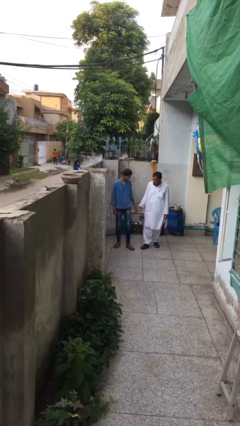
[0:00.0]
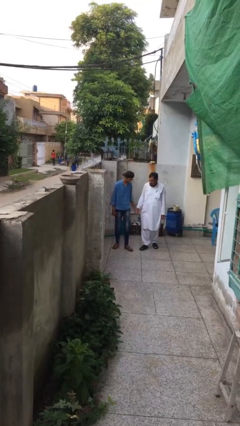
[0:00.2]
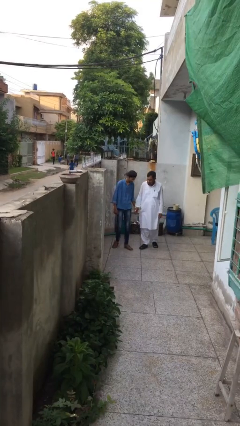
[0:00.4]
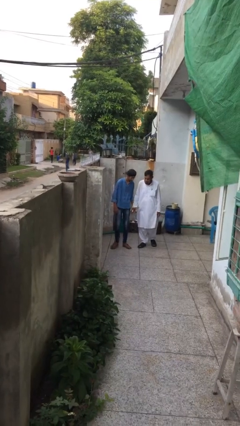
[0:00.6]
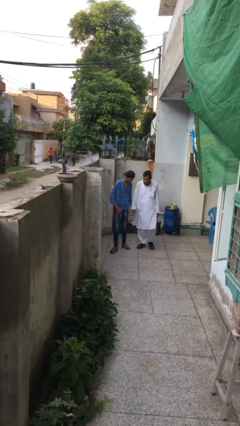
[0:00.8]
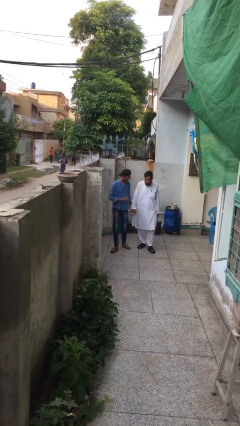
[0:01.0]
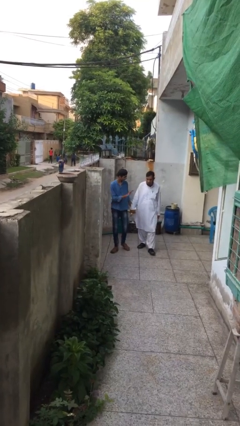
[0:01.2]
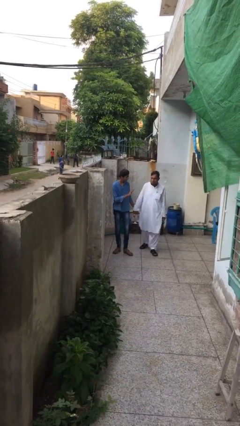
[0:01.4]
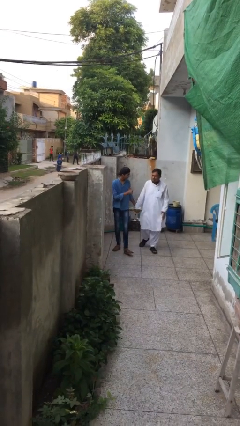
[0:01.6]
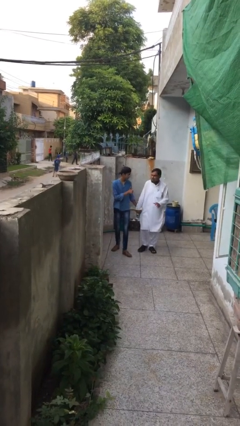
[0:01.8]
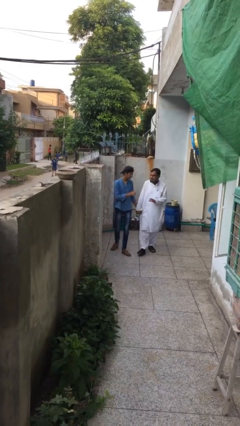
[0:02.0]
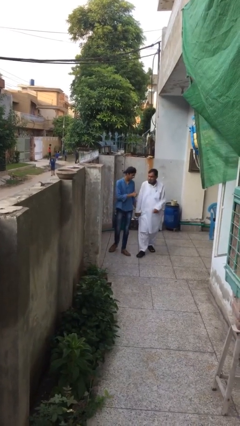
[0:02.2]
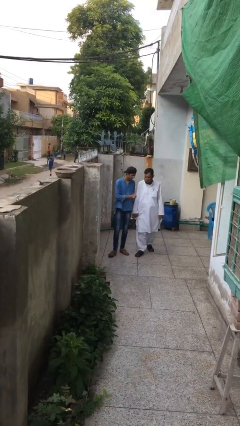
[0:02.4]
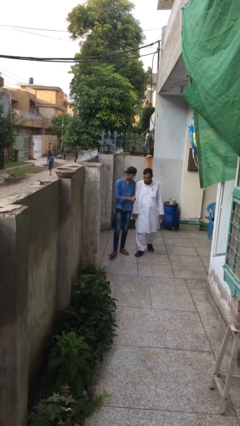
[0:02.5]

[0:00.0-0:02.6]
person holds hand

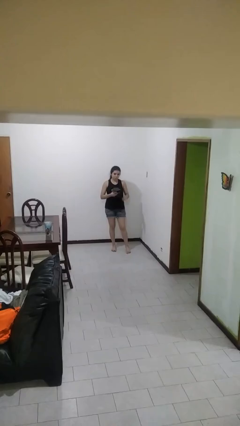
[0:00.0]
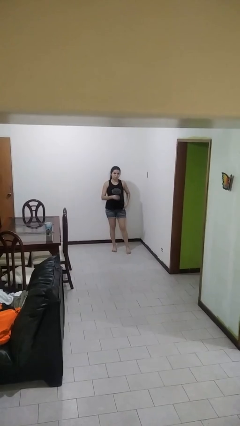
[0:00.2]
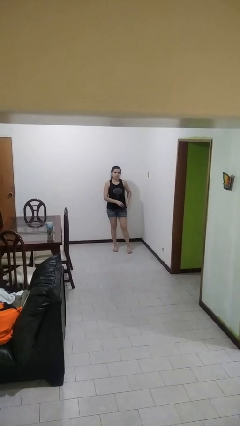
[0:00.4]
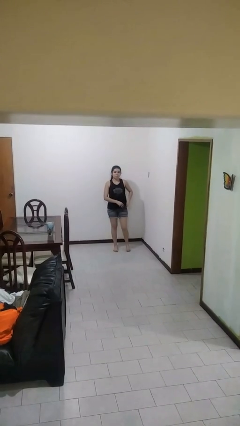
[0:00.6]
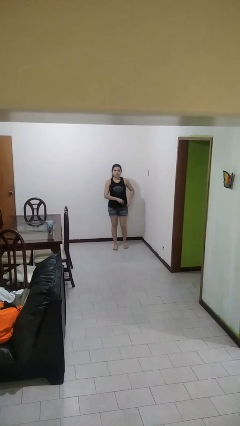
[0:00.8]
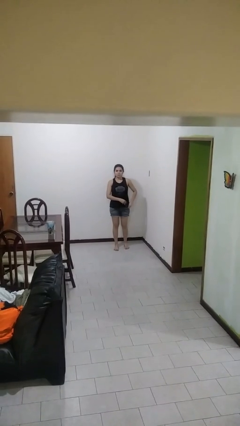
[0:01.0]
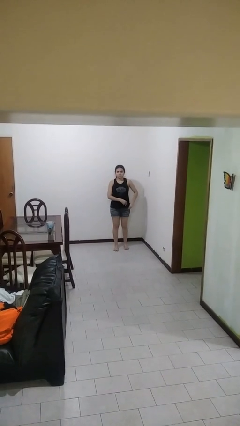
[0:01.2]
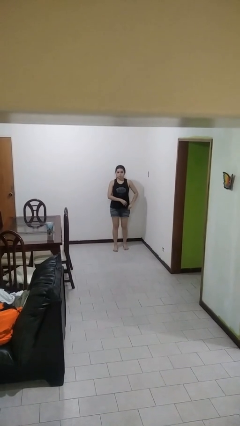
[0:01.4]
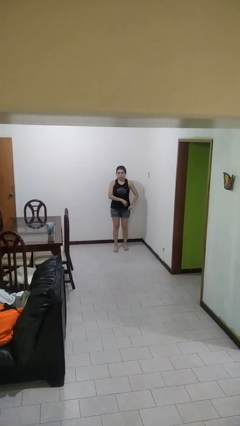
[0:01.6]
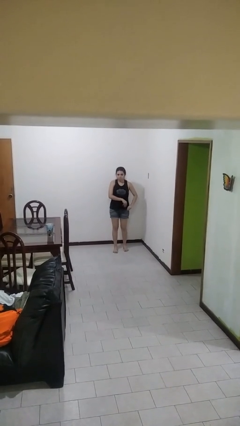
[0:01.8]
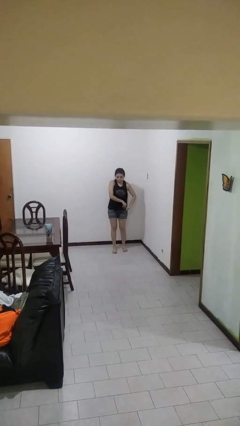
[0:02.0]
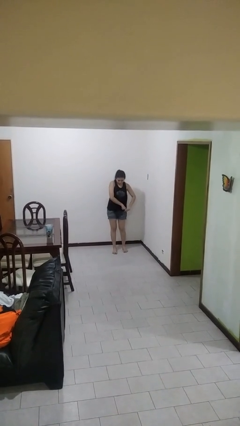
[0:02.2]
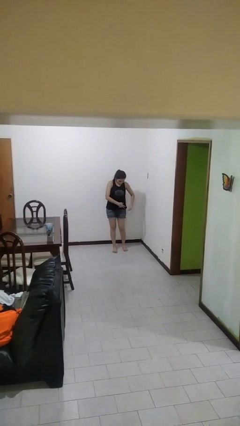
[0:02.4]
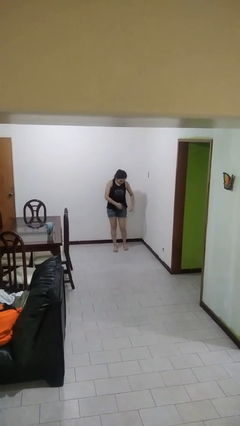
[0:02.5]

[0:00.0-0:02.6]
person puts phone into pocket

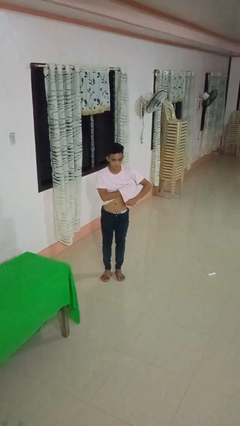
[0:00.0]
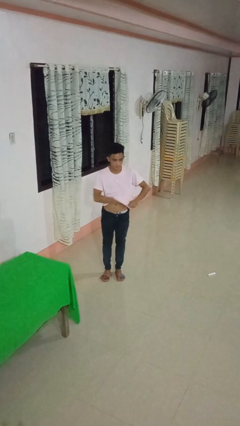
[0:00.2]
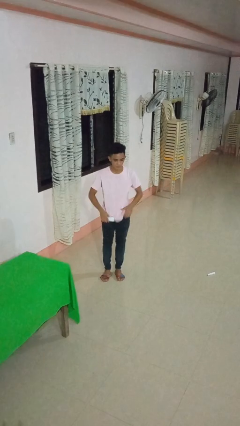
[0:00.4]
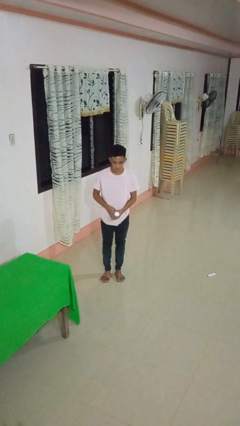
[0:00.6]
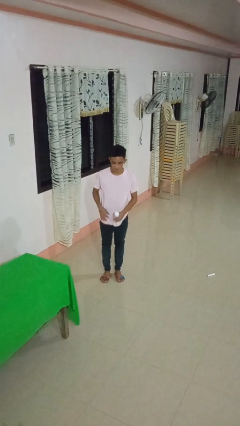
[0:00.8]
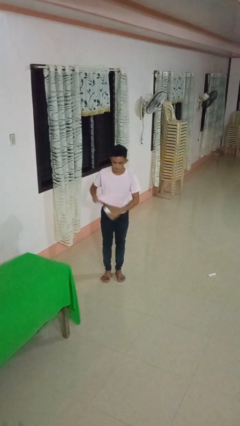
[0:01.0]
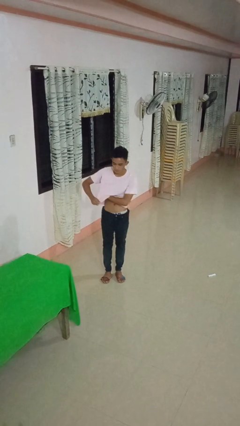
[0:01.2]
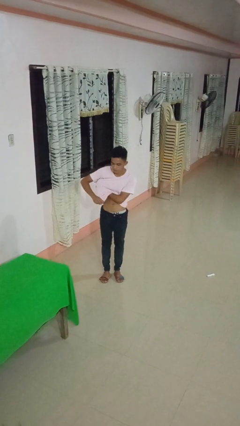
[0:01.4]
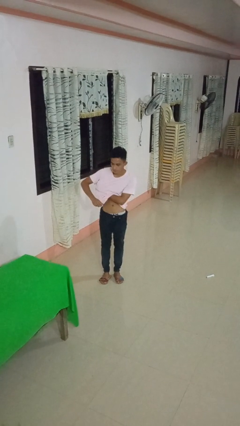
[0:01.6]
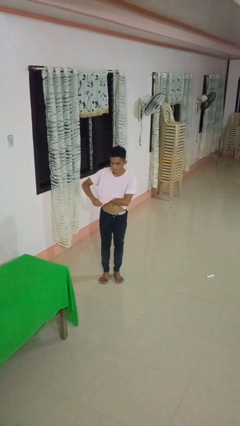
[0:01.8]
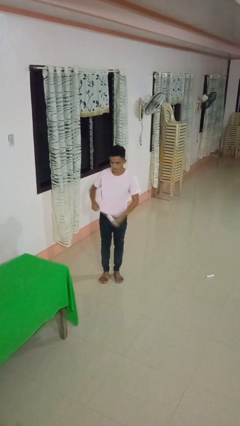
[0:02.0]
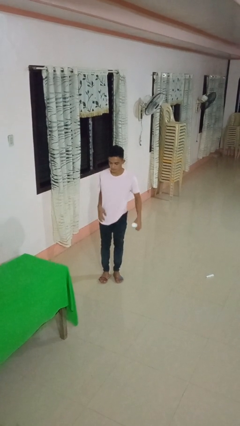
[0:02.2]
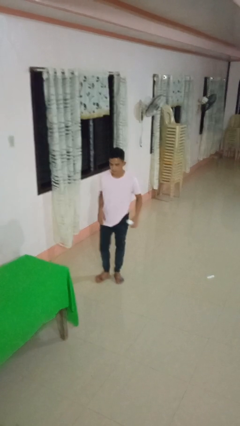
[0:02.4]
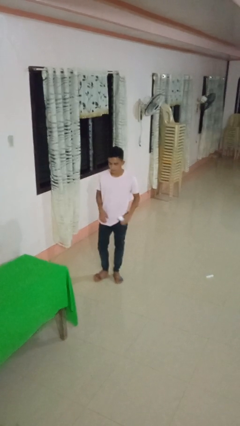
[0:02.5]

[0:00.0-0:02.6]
person applies deodorant

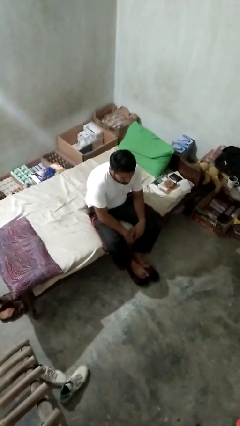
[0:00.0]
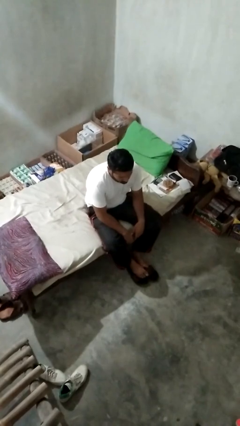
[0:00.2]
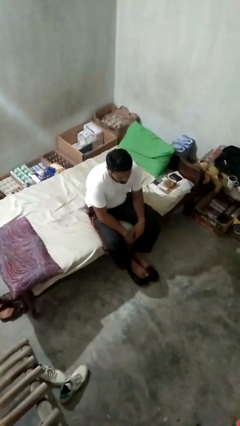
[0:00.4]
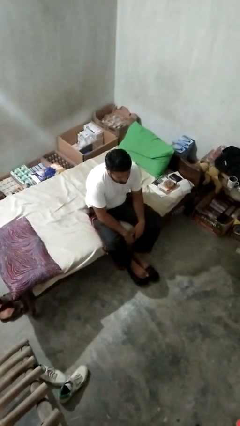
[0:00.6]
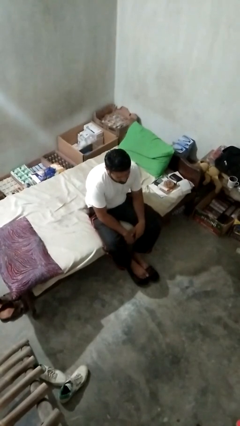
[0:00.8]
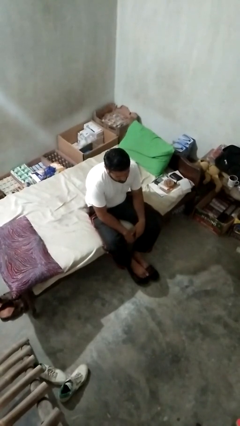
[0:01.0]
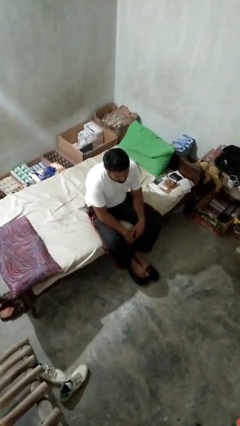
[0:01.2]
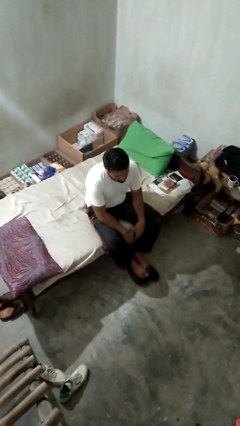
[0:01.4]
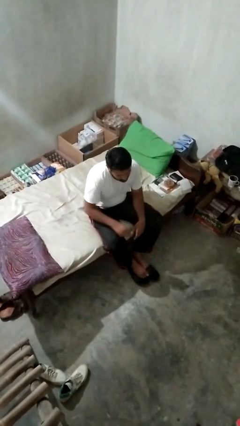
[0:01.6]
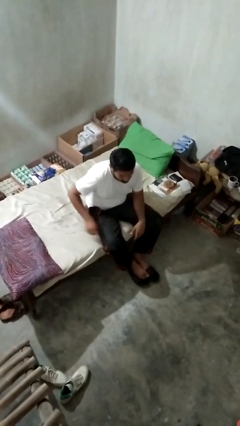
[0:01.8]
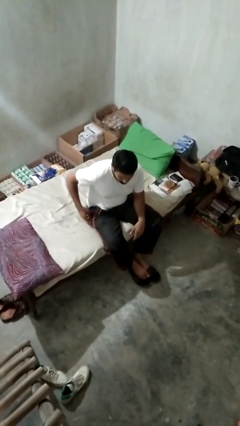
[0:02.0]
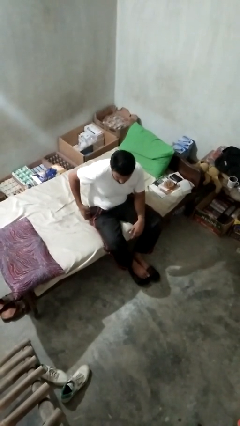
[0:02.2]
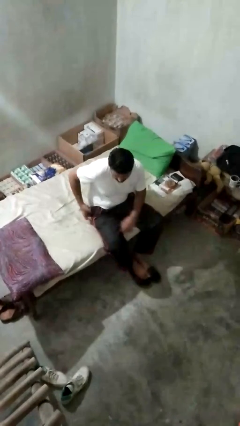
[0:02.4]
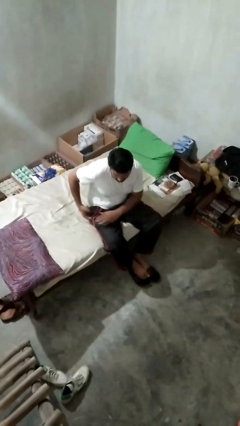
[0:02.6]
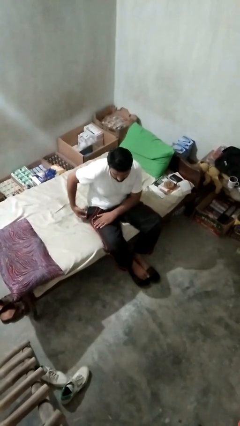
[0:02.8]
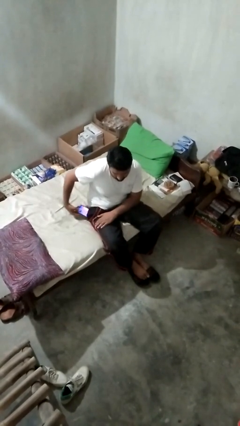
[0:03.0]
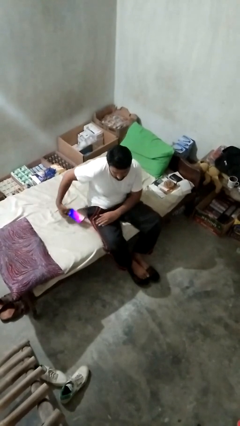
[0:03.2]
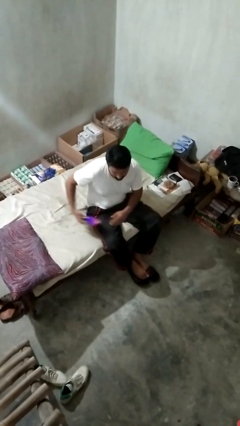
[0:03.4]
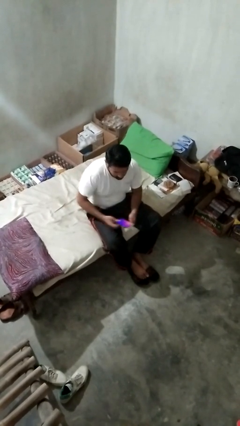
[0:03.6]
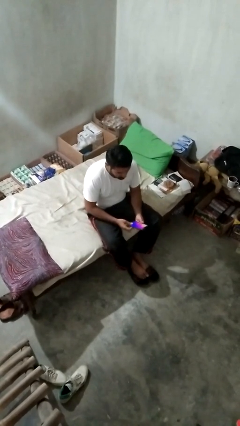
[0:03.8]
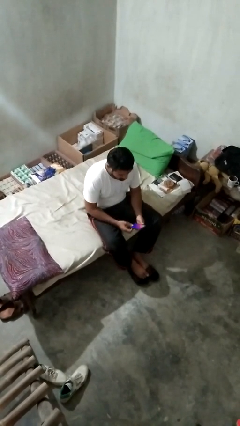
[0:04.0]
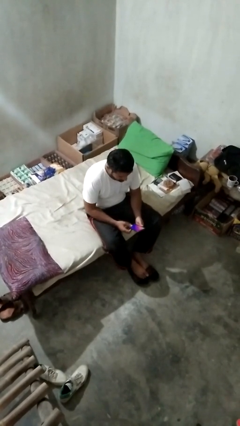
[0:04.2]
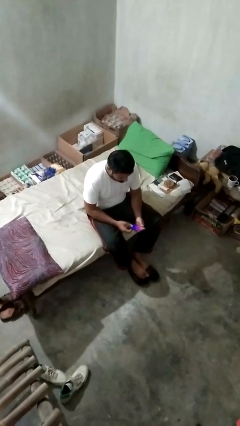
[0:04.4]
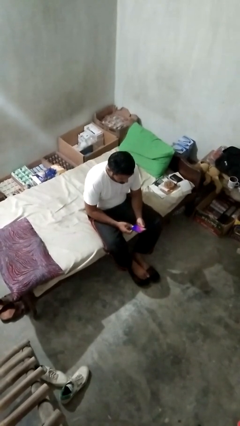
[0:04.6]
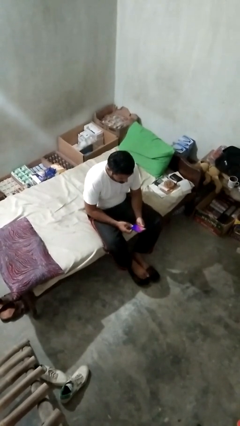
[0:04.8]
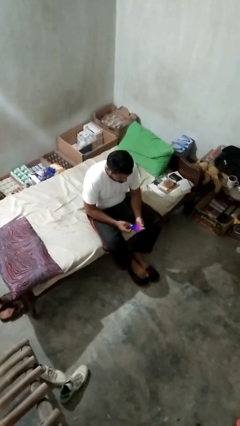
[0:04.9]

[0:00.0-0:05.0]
person takes phone from pocket

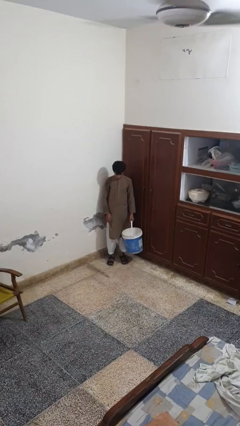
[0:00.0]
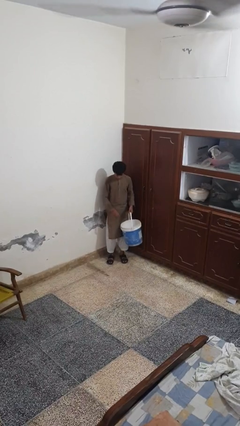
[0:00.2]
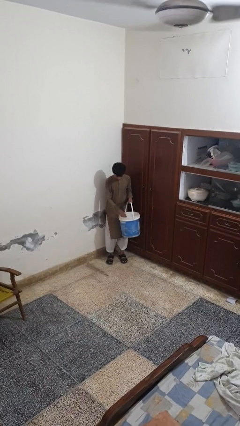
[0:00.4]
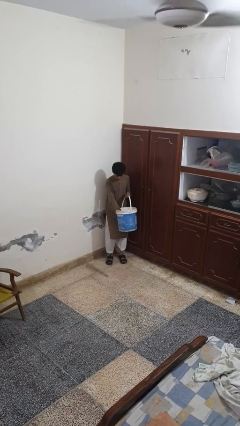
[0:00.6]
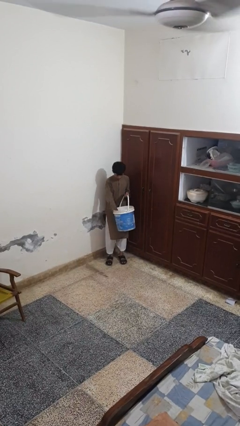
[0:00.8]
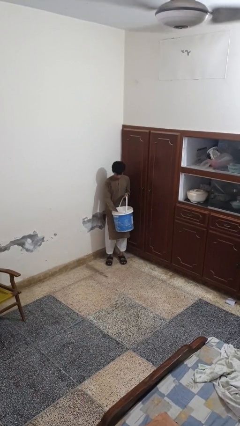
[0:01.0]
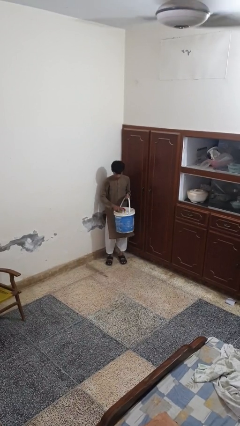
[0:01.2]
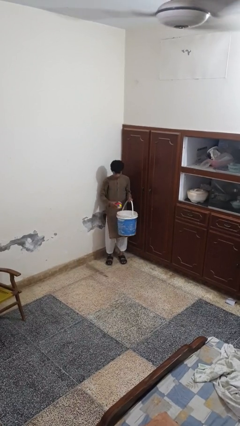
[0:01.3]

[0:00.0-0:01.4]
person takes object from basket

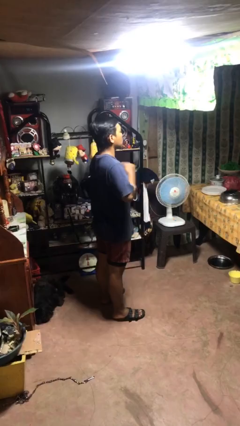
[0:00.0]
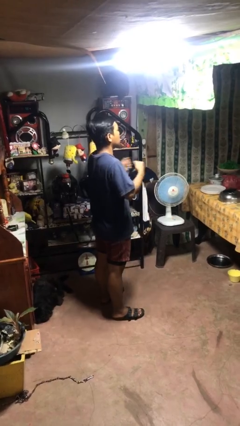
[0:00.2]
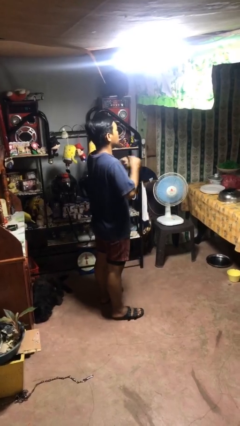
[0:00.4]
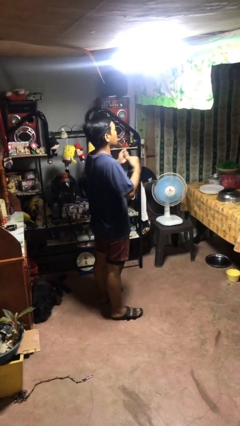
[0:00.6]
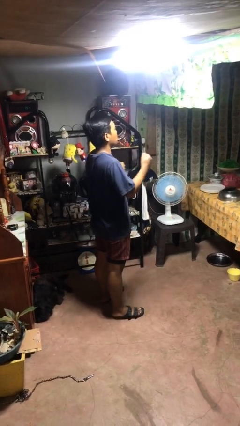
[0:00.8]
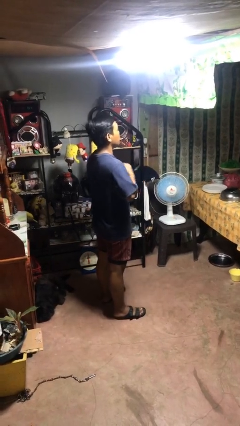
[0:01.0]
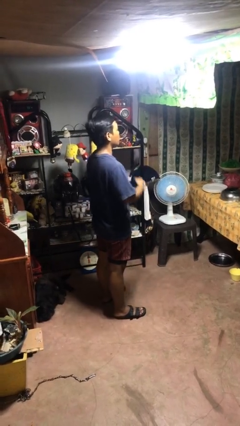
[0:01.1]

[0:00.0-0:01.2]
person drums on chest

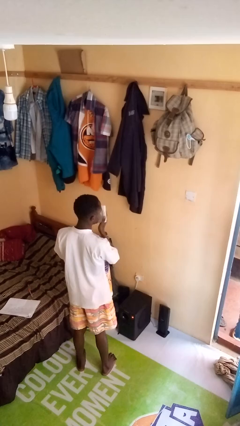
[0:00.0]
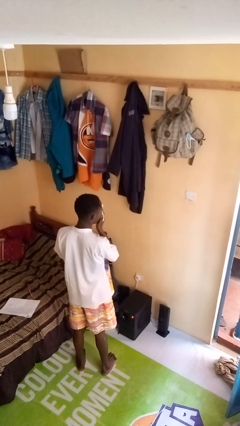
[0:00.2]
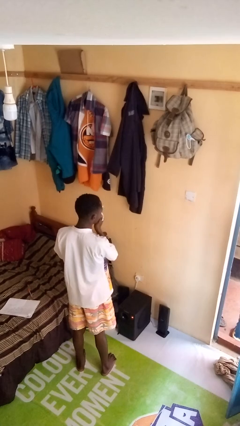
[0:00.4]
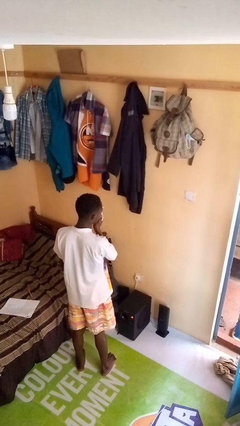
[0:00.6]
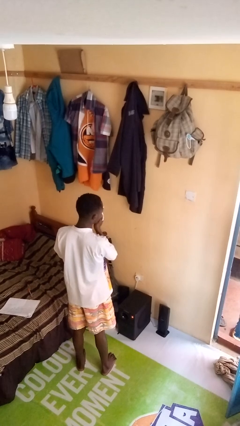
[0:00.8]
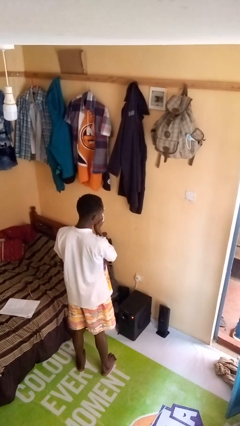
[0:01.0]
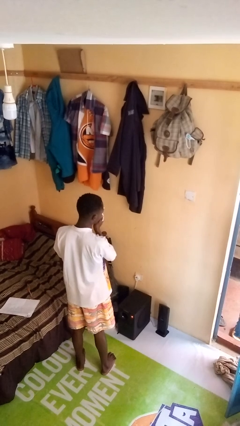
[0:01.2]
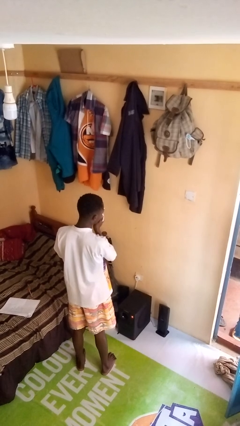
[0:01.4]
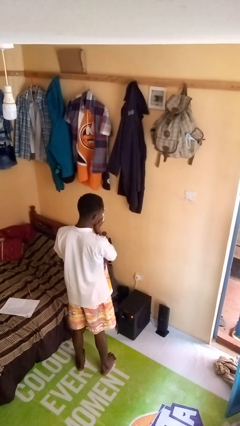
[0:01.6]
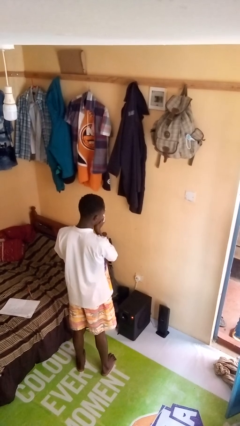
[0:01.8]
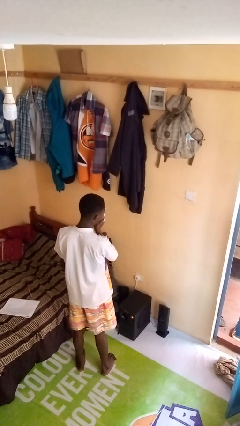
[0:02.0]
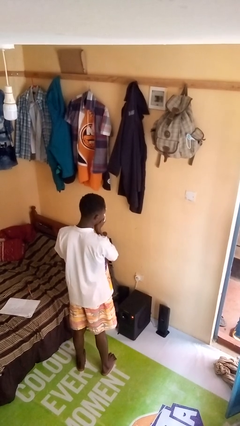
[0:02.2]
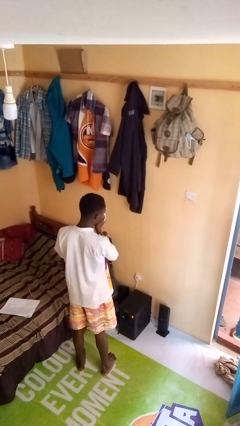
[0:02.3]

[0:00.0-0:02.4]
person blows nose
